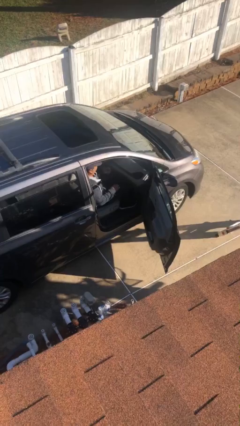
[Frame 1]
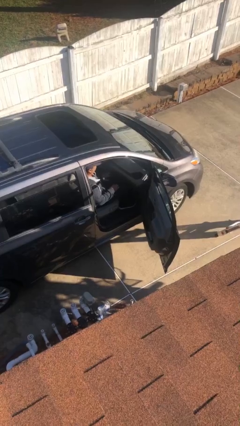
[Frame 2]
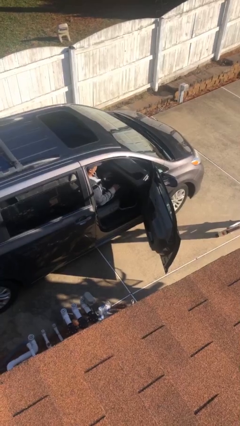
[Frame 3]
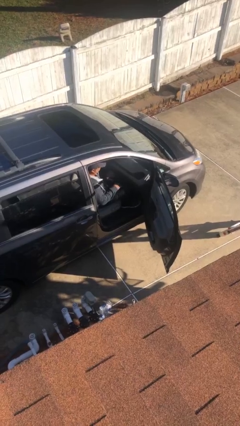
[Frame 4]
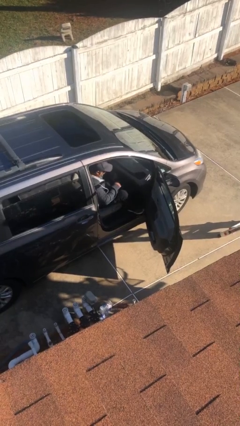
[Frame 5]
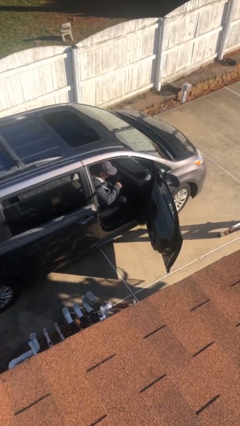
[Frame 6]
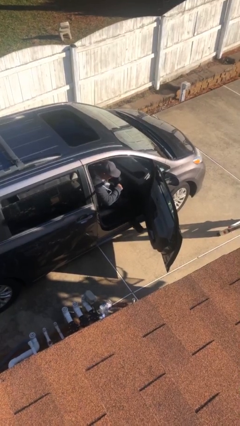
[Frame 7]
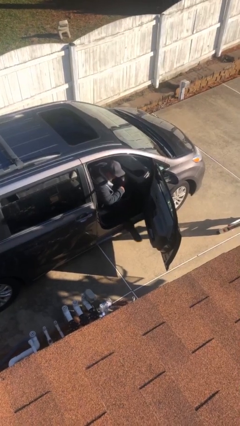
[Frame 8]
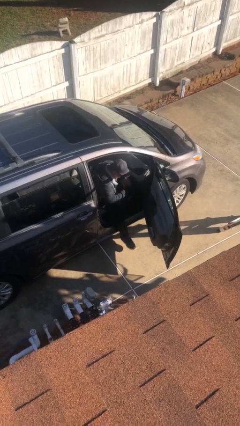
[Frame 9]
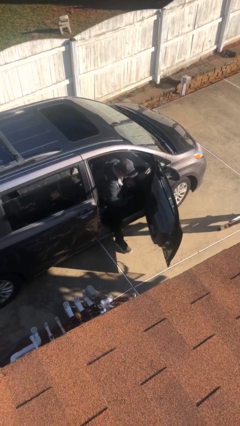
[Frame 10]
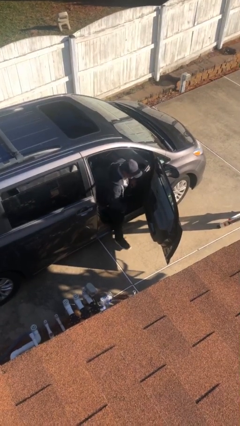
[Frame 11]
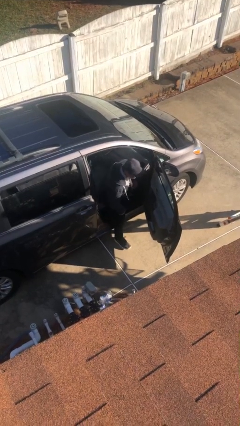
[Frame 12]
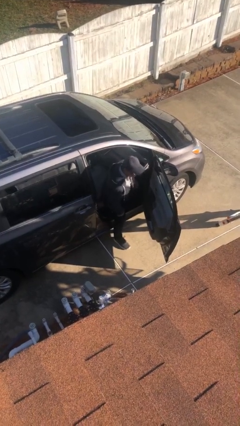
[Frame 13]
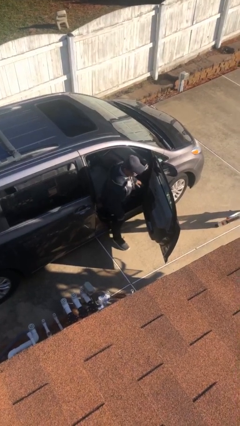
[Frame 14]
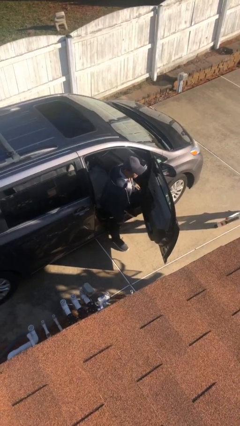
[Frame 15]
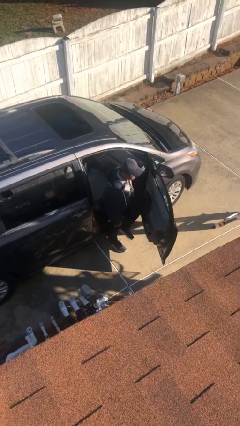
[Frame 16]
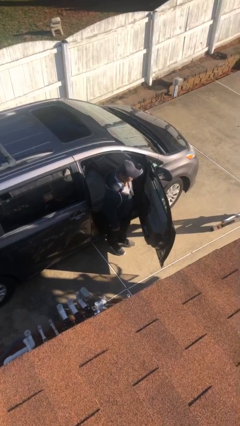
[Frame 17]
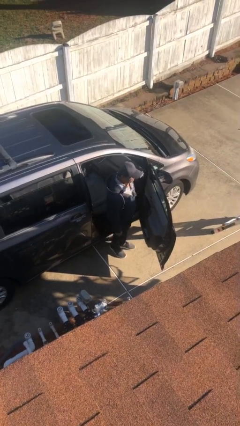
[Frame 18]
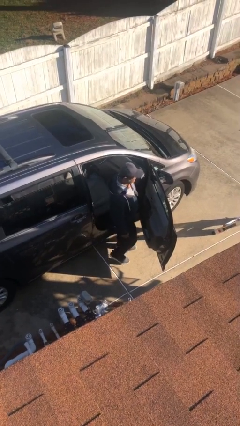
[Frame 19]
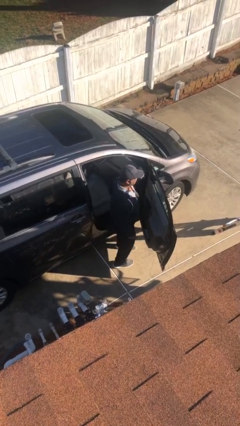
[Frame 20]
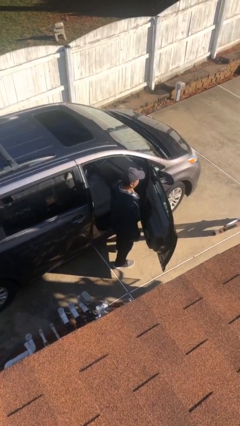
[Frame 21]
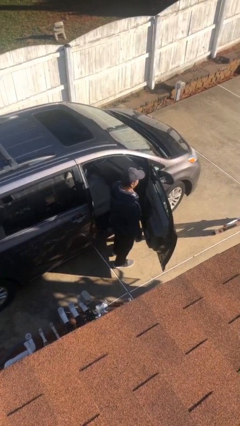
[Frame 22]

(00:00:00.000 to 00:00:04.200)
person exits car

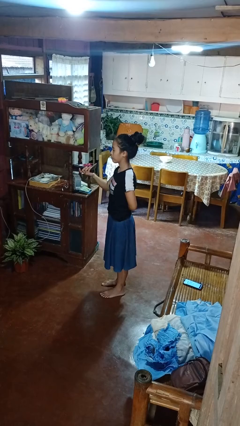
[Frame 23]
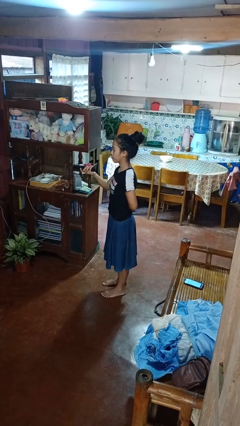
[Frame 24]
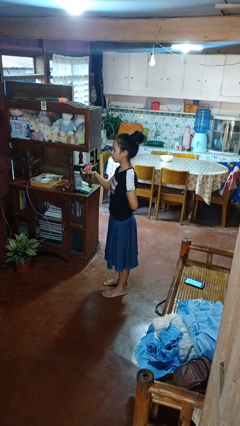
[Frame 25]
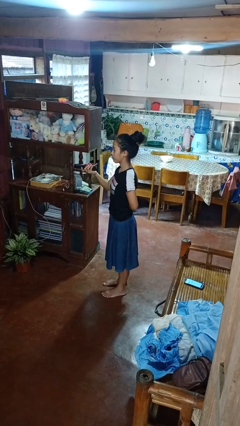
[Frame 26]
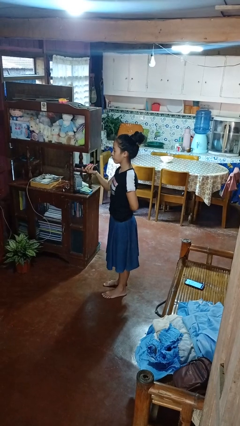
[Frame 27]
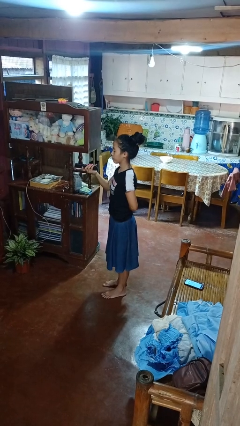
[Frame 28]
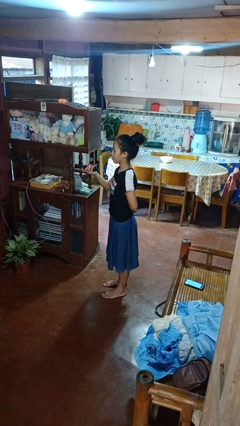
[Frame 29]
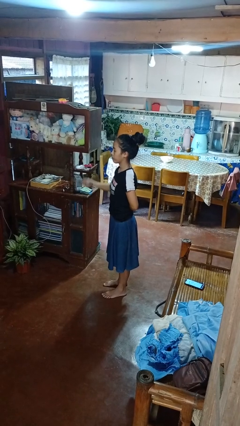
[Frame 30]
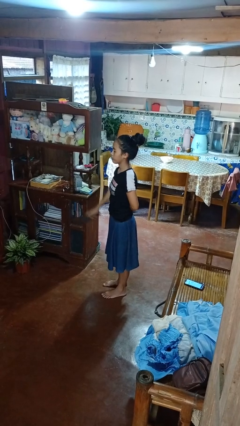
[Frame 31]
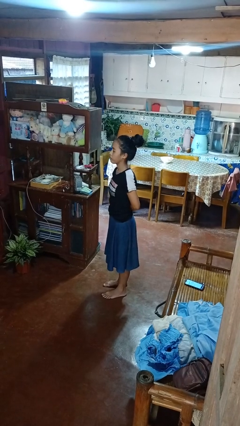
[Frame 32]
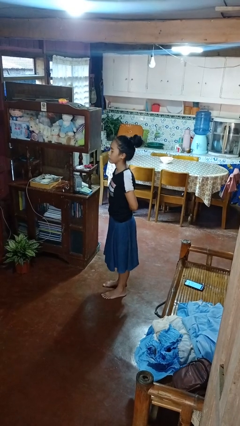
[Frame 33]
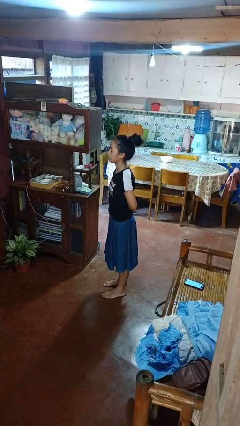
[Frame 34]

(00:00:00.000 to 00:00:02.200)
person uses television remote

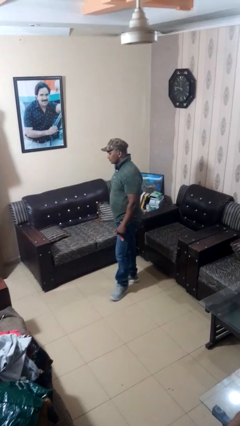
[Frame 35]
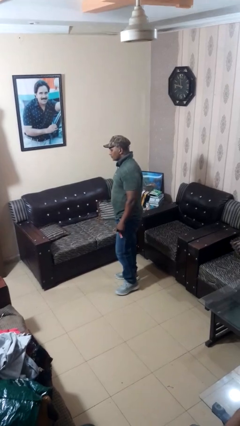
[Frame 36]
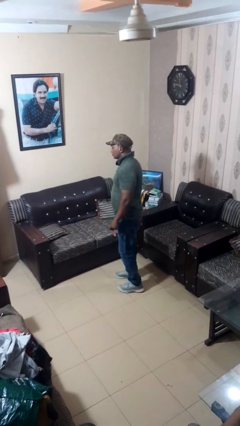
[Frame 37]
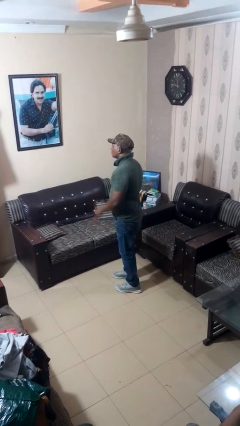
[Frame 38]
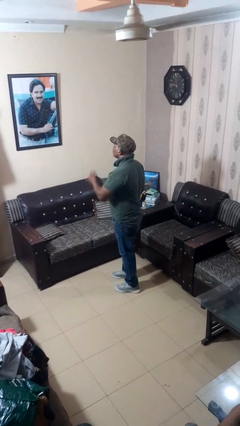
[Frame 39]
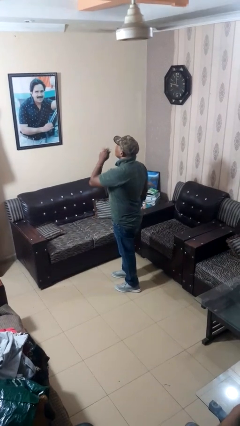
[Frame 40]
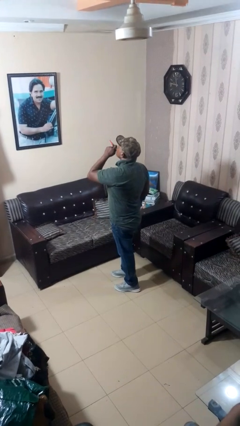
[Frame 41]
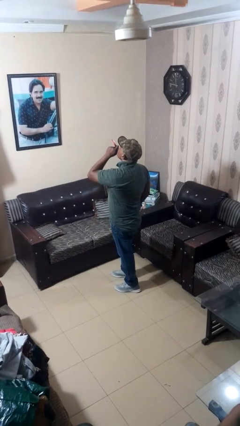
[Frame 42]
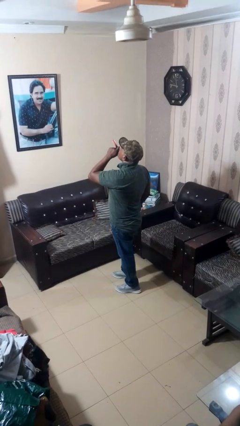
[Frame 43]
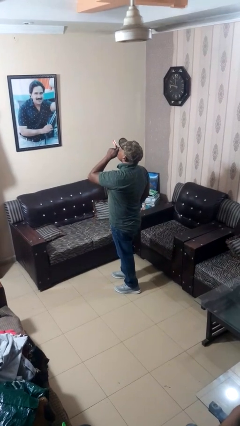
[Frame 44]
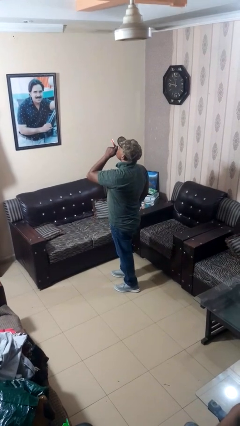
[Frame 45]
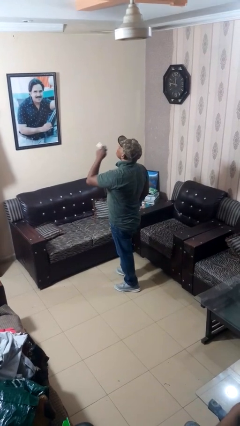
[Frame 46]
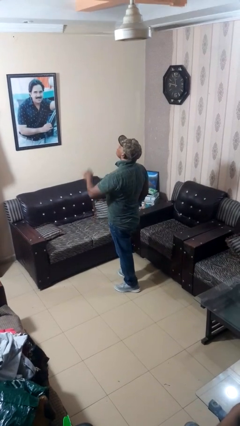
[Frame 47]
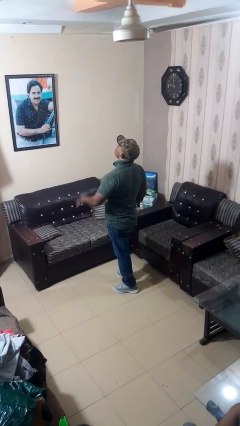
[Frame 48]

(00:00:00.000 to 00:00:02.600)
person vapes

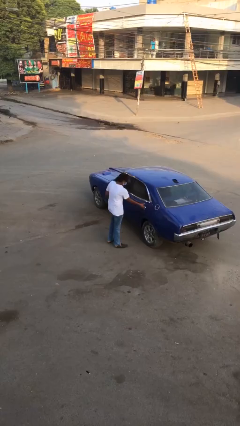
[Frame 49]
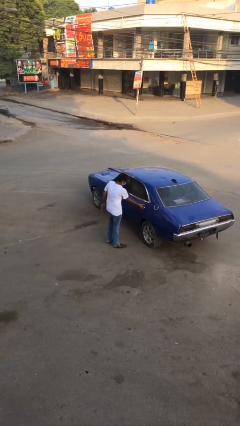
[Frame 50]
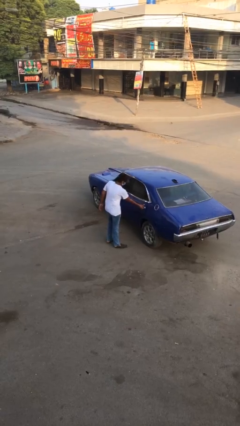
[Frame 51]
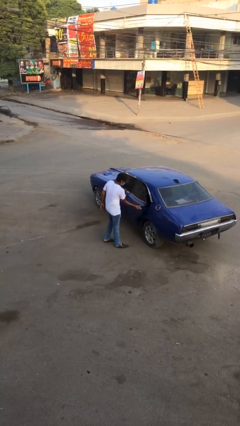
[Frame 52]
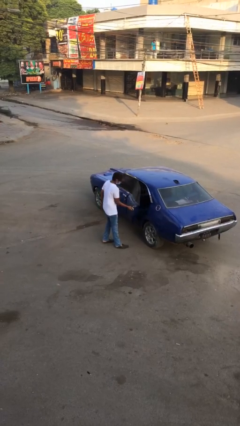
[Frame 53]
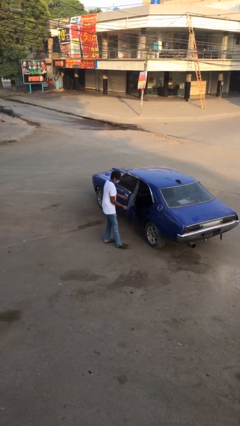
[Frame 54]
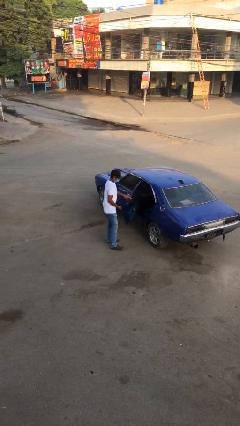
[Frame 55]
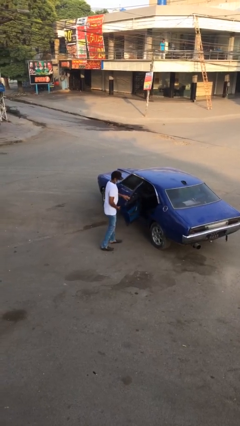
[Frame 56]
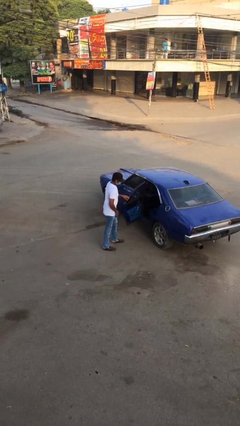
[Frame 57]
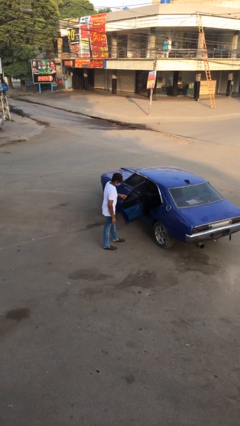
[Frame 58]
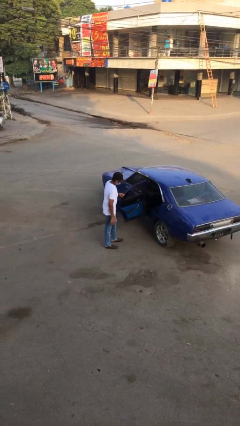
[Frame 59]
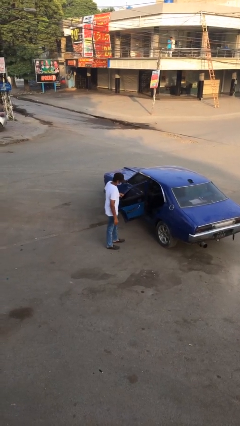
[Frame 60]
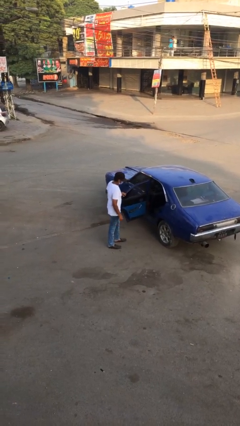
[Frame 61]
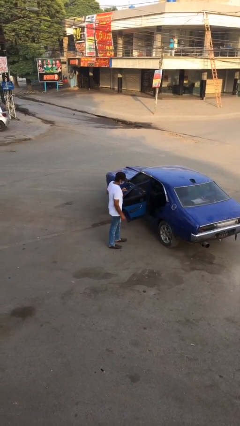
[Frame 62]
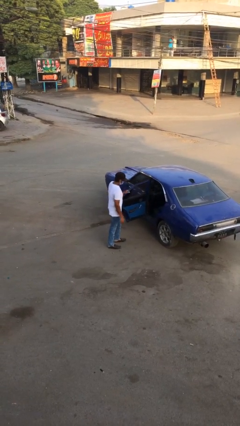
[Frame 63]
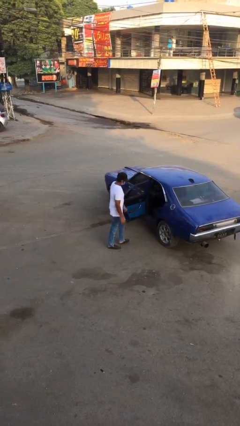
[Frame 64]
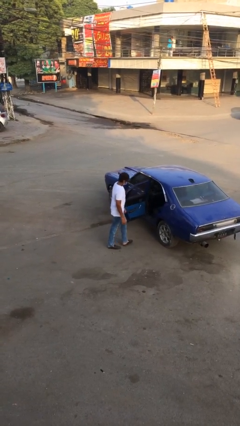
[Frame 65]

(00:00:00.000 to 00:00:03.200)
person opens car door

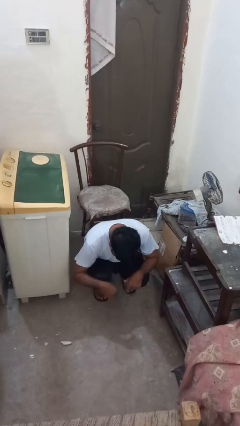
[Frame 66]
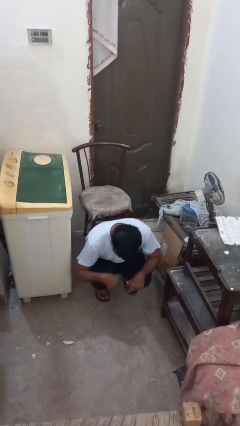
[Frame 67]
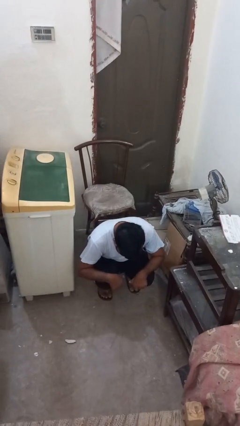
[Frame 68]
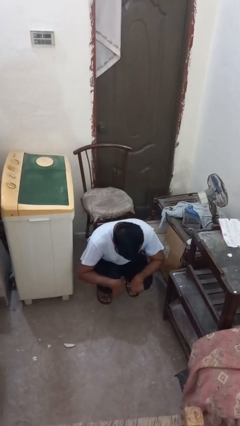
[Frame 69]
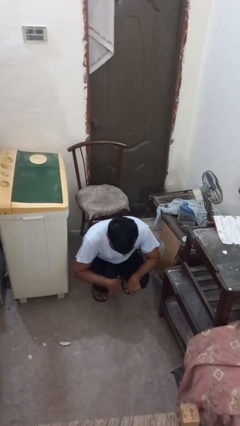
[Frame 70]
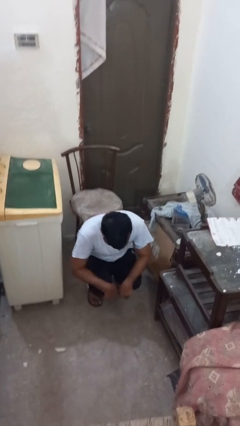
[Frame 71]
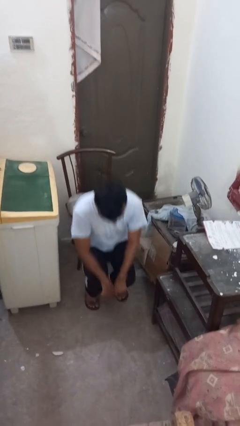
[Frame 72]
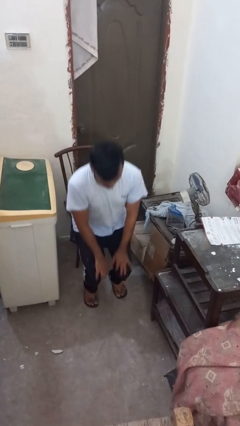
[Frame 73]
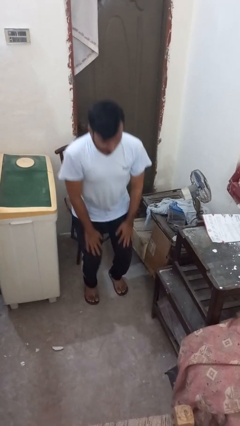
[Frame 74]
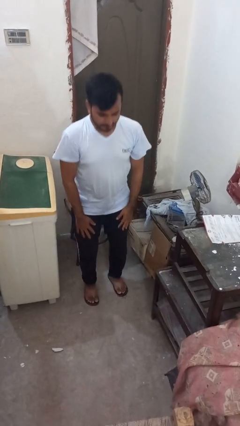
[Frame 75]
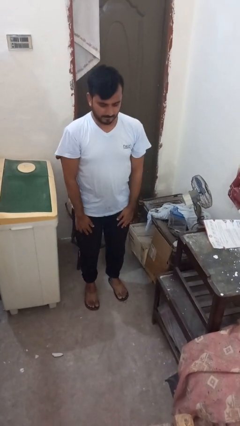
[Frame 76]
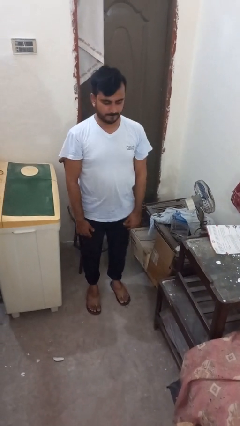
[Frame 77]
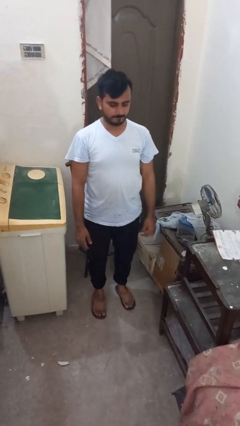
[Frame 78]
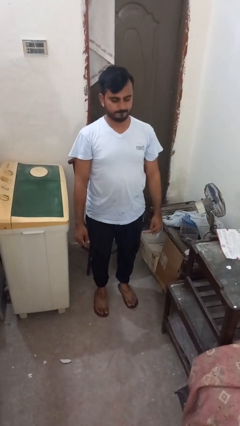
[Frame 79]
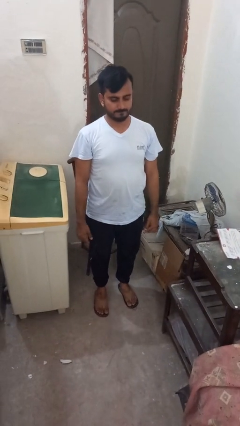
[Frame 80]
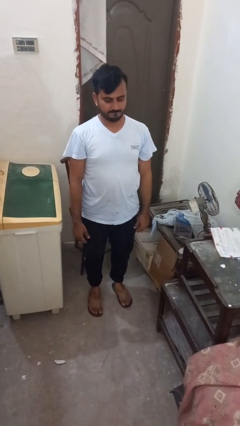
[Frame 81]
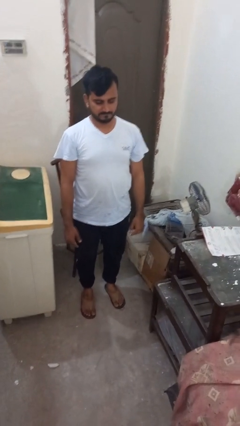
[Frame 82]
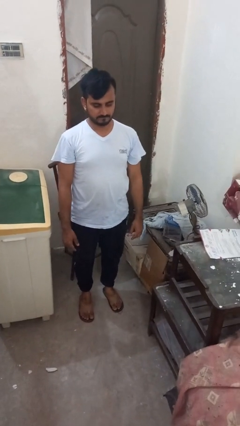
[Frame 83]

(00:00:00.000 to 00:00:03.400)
person stands up from floor

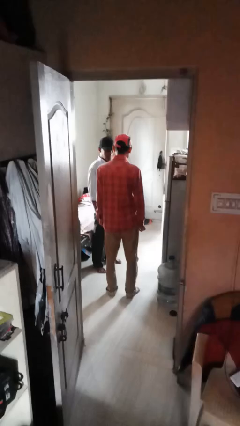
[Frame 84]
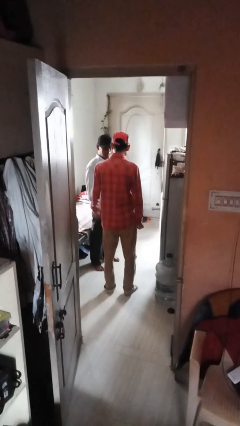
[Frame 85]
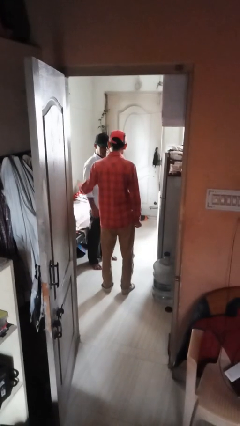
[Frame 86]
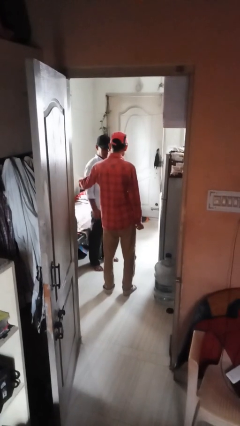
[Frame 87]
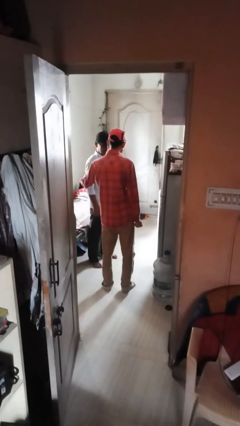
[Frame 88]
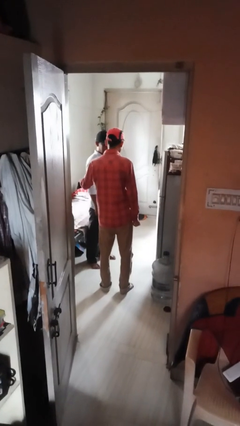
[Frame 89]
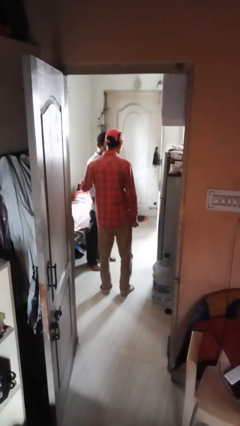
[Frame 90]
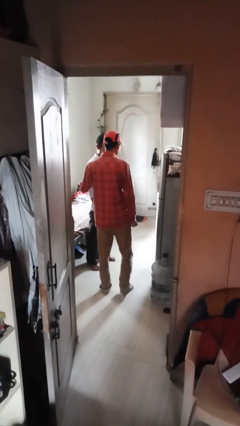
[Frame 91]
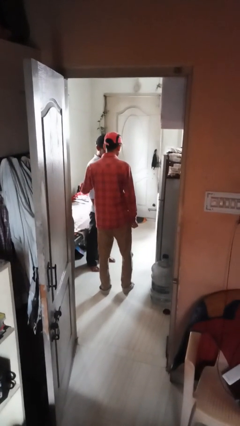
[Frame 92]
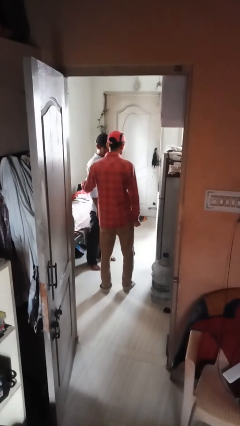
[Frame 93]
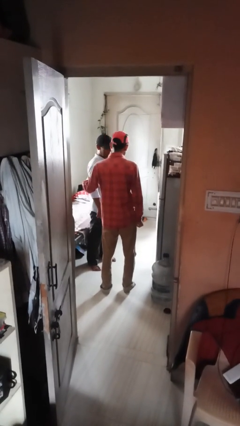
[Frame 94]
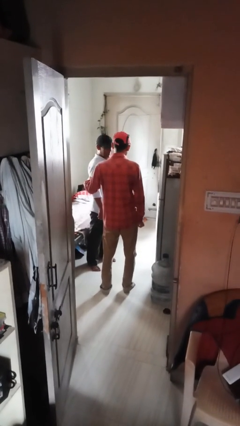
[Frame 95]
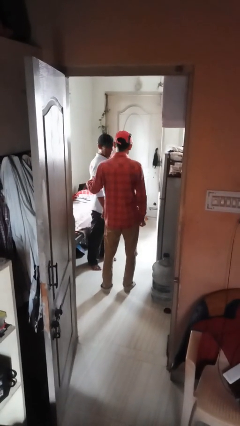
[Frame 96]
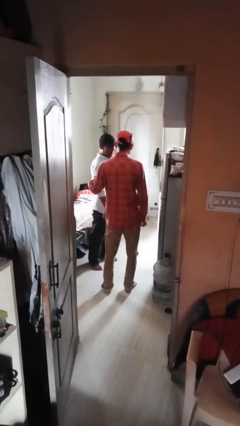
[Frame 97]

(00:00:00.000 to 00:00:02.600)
person grabs person by shoulder
